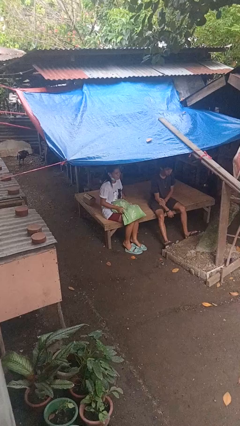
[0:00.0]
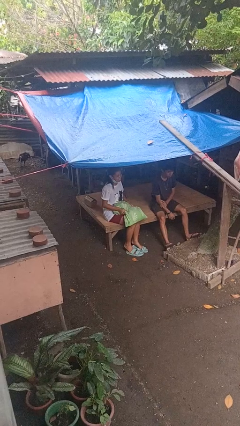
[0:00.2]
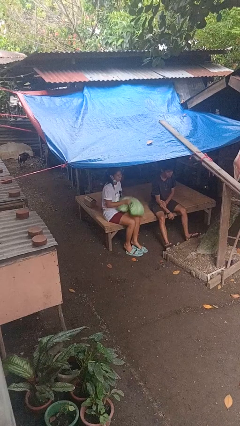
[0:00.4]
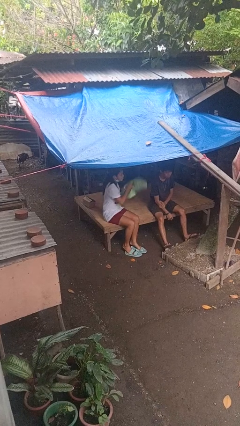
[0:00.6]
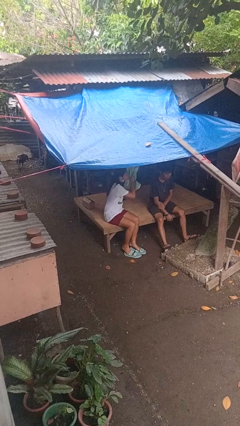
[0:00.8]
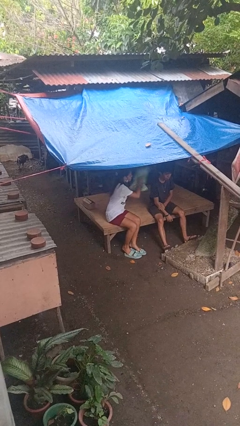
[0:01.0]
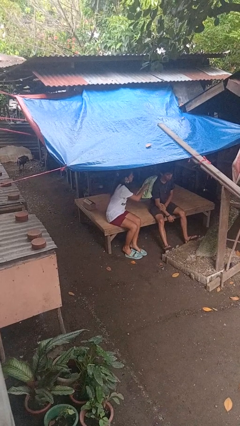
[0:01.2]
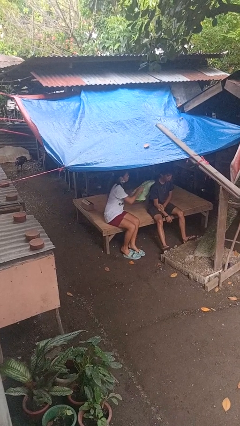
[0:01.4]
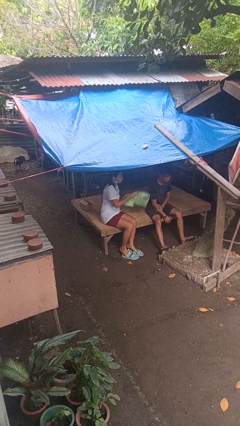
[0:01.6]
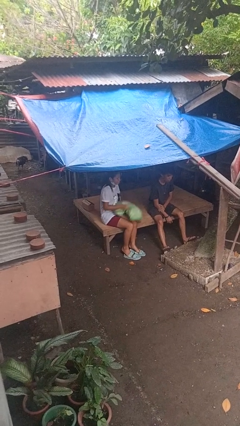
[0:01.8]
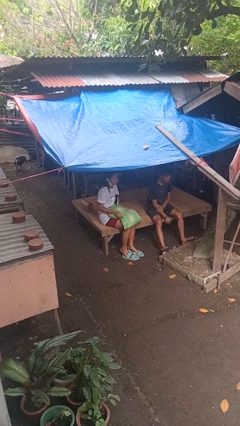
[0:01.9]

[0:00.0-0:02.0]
person hits person with pillow

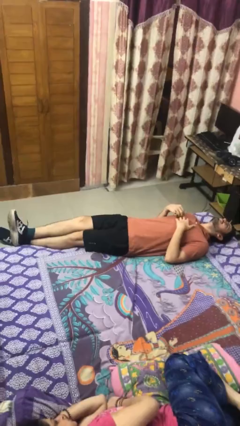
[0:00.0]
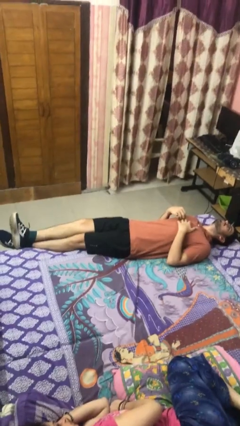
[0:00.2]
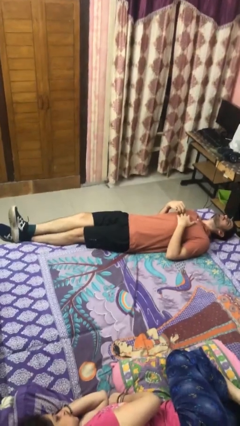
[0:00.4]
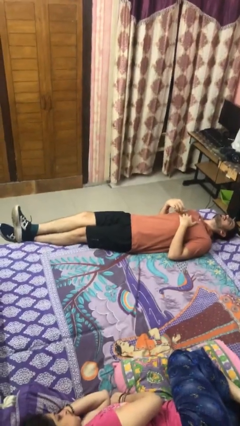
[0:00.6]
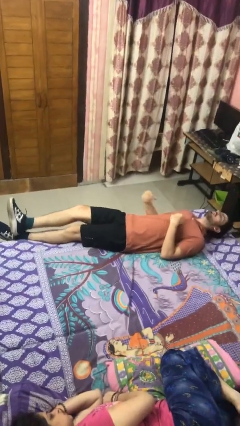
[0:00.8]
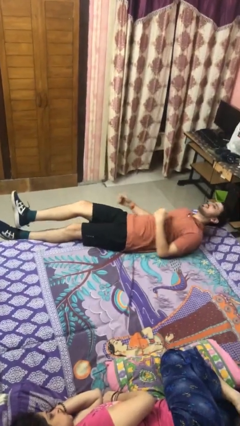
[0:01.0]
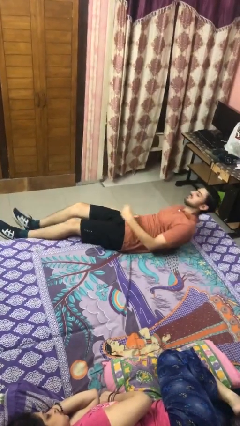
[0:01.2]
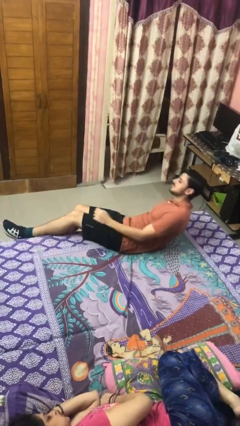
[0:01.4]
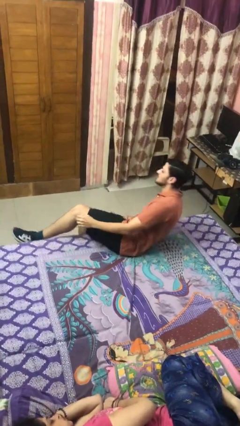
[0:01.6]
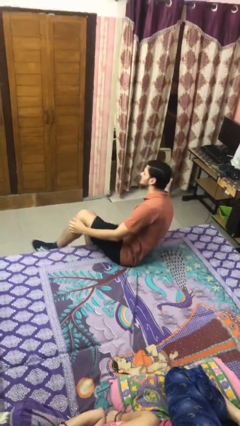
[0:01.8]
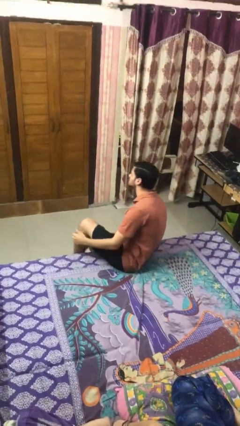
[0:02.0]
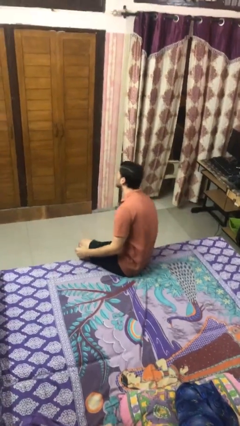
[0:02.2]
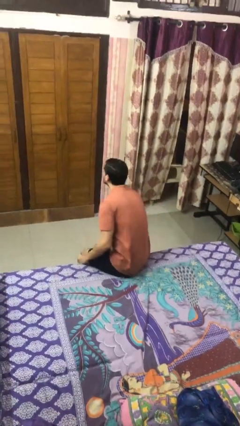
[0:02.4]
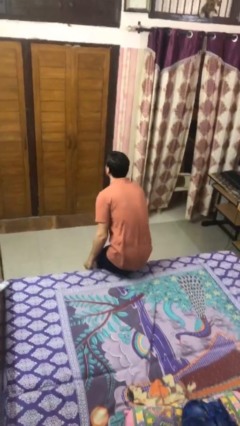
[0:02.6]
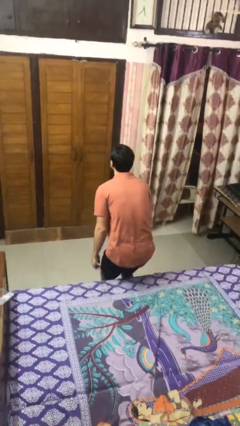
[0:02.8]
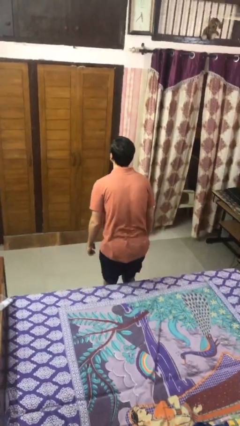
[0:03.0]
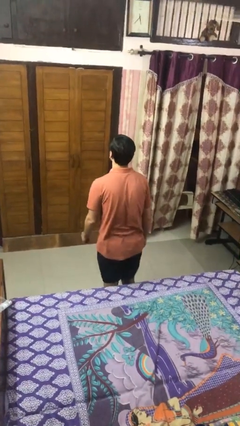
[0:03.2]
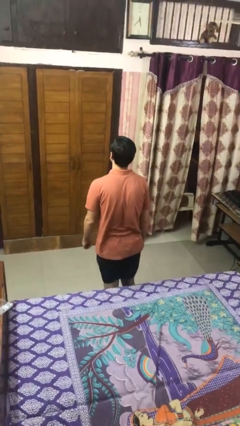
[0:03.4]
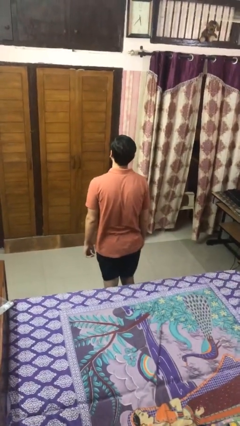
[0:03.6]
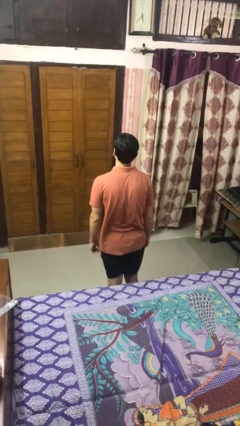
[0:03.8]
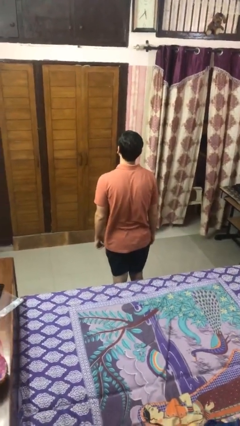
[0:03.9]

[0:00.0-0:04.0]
person stands up

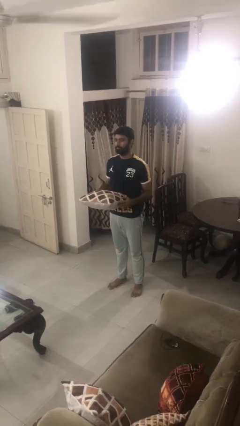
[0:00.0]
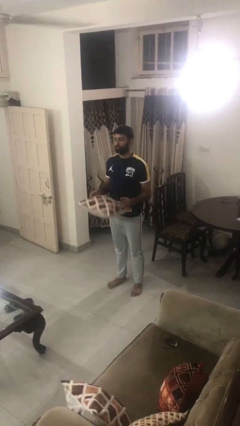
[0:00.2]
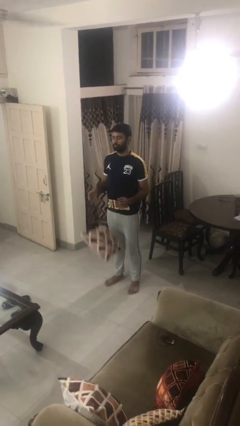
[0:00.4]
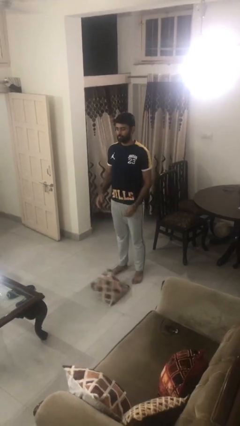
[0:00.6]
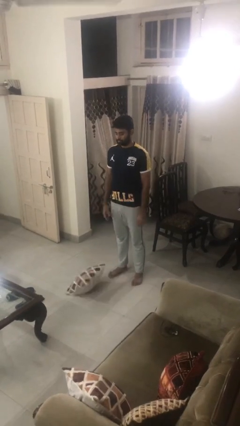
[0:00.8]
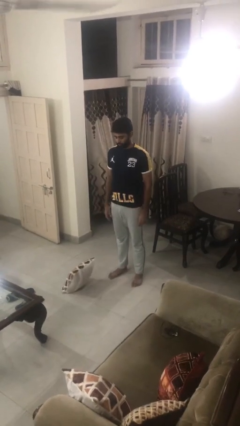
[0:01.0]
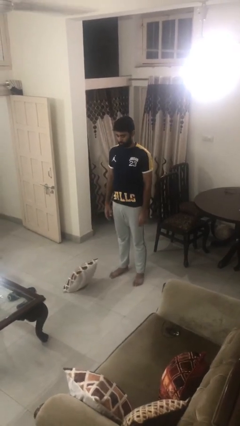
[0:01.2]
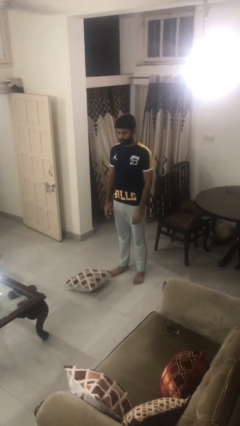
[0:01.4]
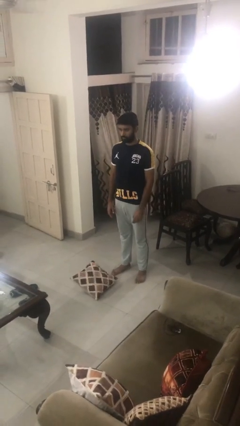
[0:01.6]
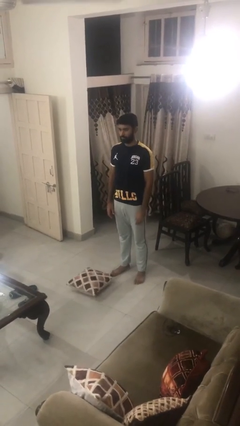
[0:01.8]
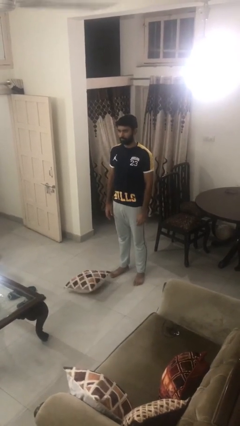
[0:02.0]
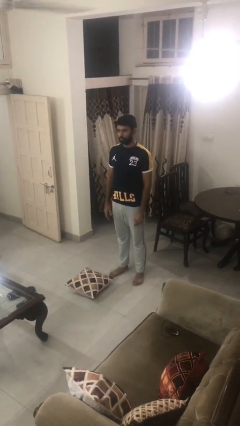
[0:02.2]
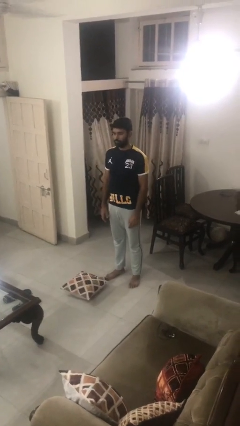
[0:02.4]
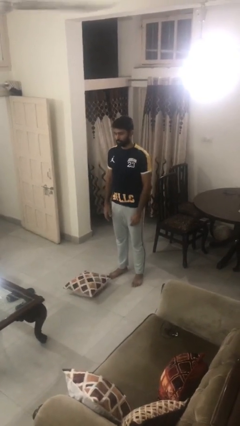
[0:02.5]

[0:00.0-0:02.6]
person drops object

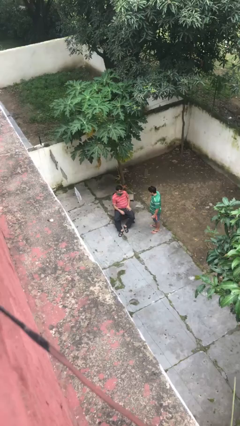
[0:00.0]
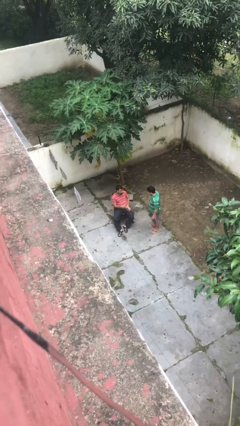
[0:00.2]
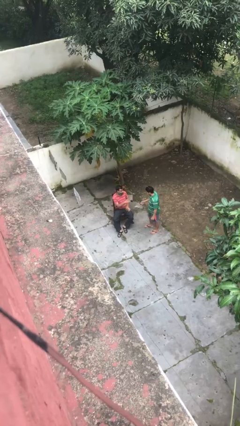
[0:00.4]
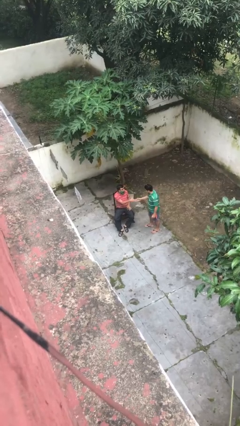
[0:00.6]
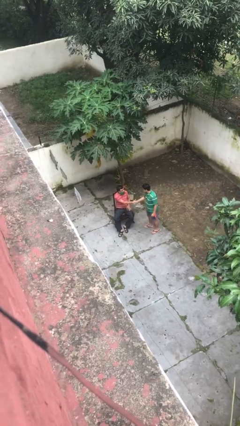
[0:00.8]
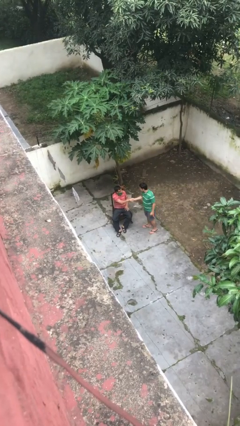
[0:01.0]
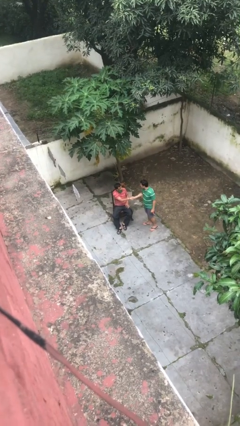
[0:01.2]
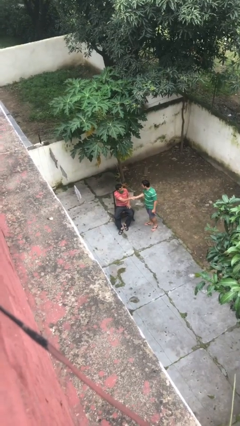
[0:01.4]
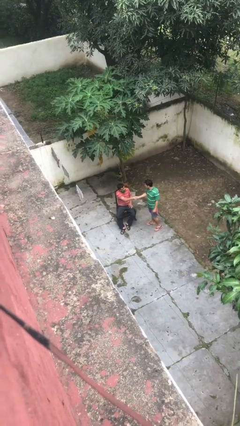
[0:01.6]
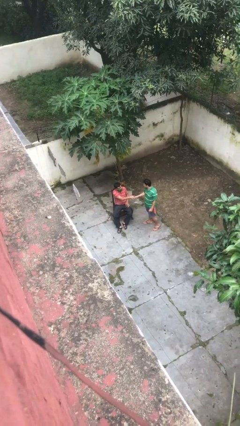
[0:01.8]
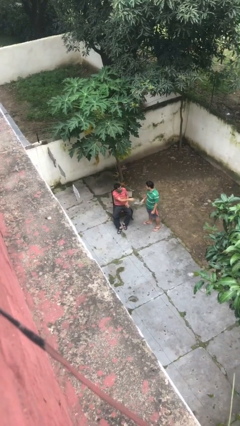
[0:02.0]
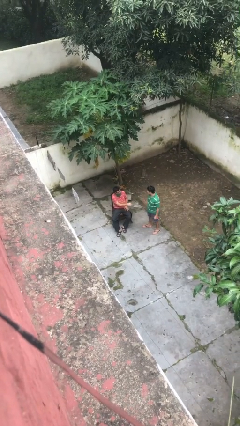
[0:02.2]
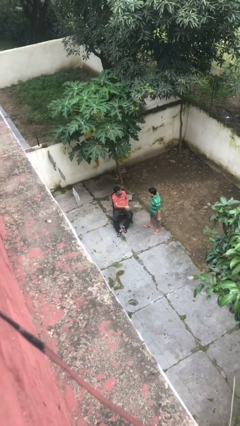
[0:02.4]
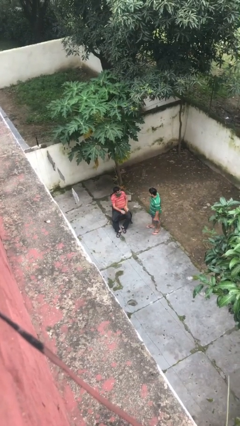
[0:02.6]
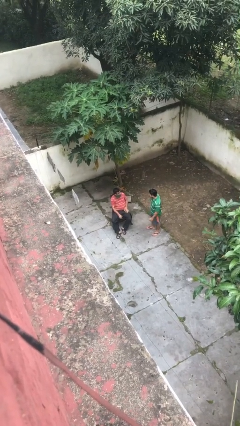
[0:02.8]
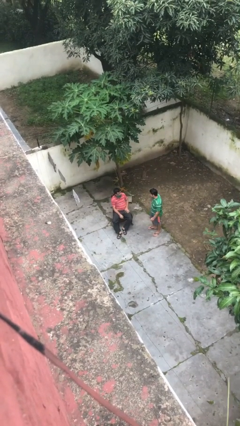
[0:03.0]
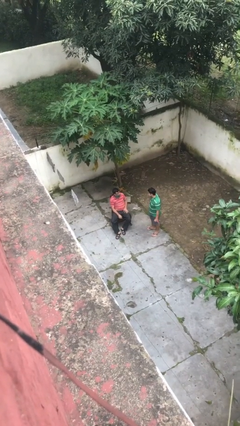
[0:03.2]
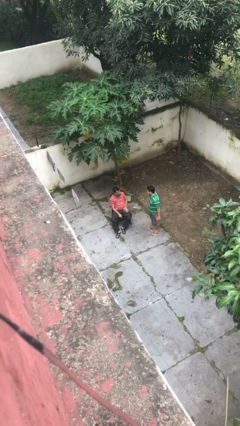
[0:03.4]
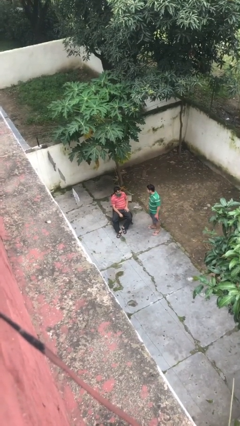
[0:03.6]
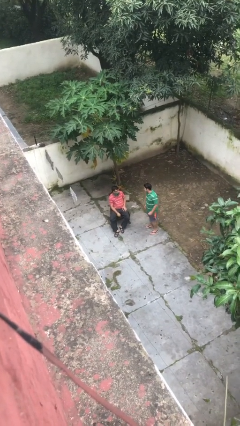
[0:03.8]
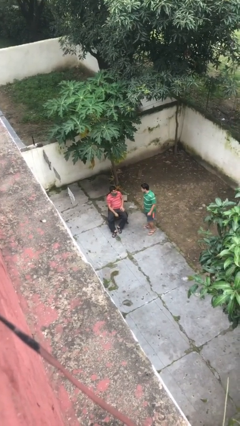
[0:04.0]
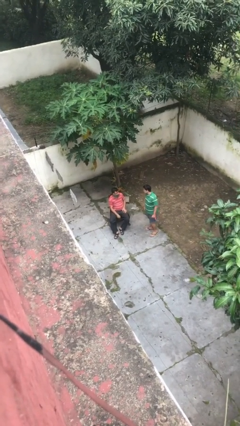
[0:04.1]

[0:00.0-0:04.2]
person shakes hand

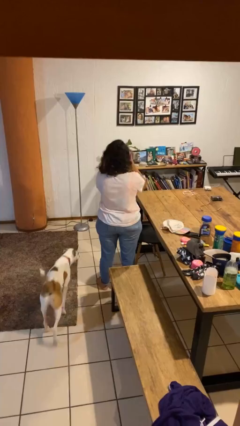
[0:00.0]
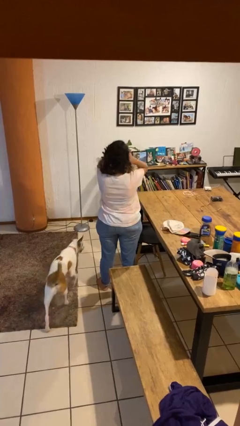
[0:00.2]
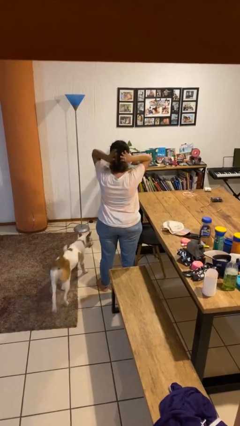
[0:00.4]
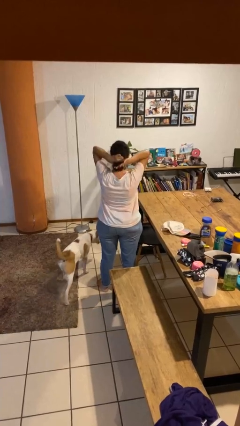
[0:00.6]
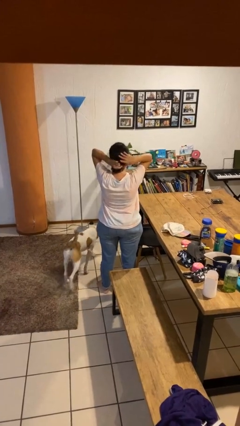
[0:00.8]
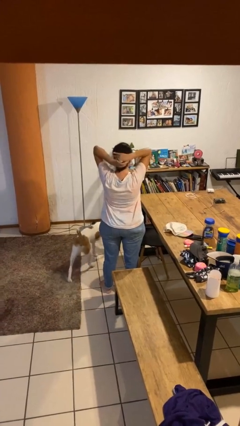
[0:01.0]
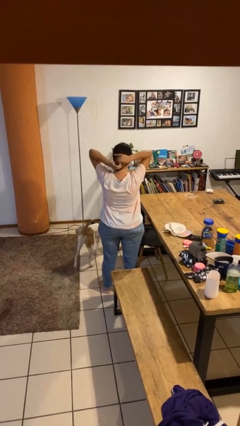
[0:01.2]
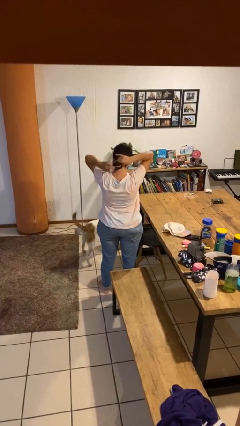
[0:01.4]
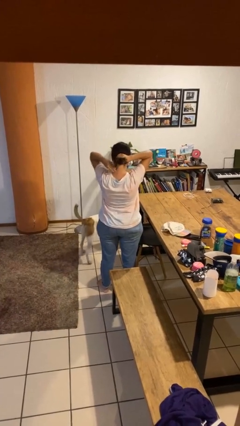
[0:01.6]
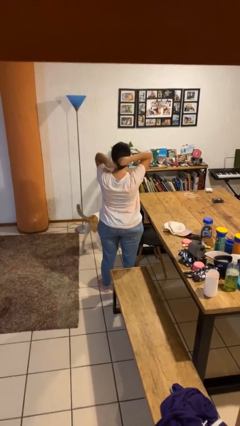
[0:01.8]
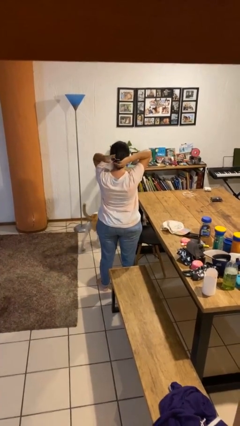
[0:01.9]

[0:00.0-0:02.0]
person puts hair in ponytail

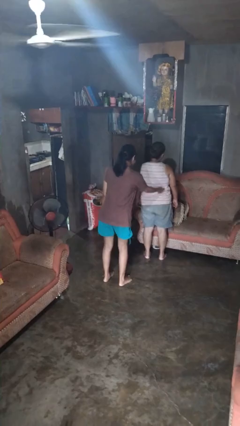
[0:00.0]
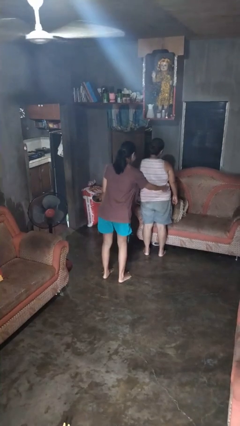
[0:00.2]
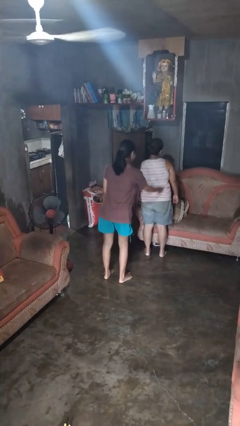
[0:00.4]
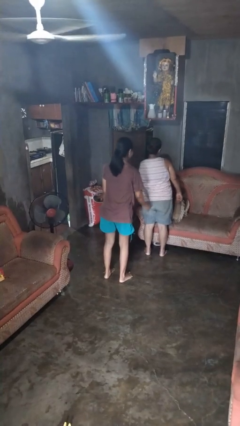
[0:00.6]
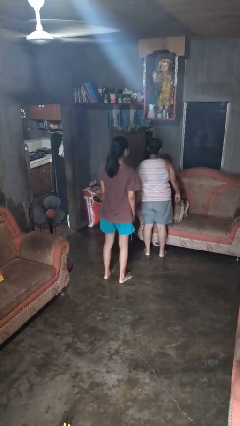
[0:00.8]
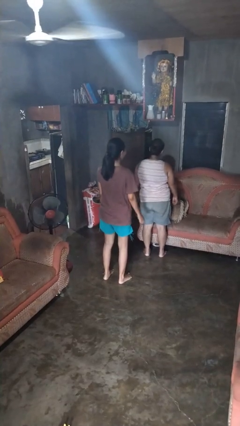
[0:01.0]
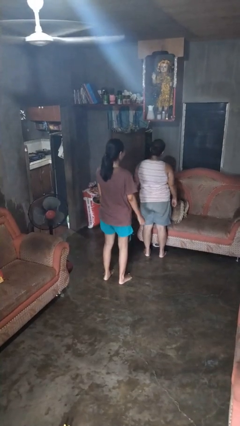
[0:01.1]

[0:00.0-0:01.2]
person tickles person

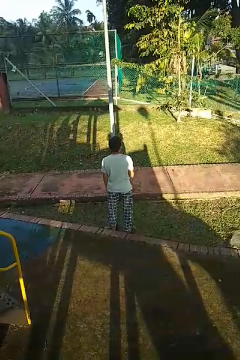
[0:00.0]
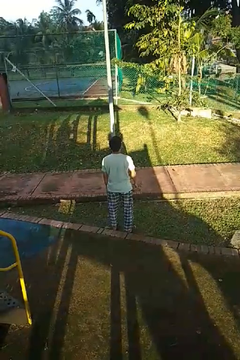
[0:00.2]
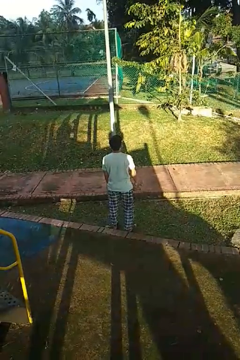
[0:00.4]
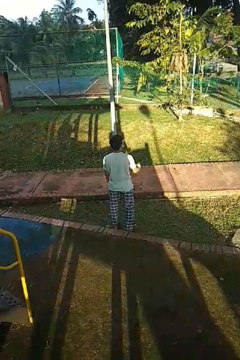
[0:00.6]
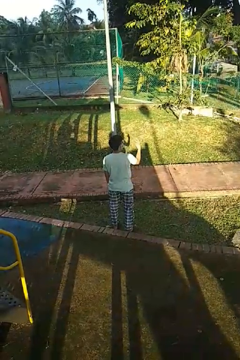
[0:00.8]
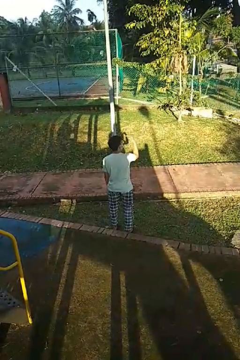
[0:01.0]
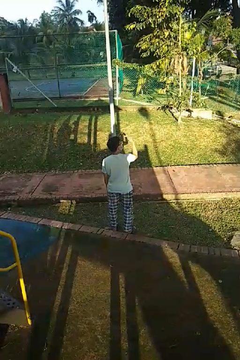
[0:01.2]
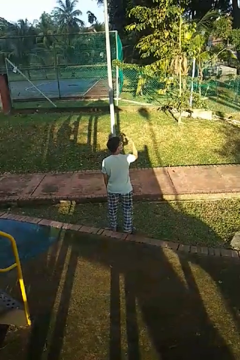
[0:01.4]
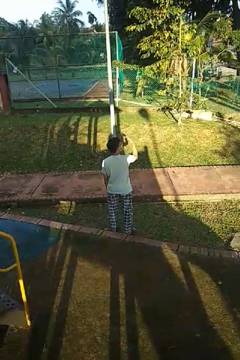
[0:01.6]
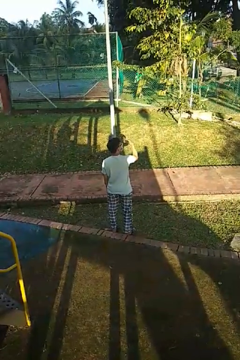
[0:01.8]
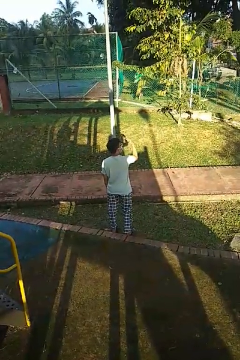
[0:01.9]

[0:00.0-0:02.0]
person gestures watch closely
